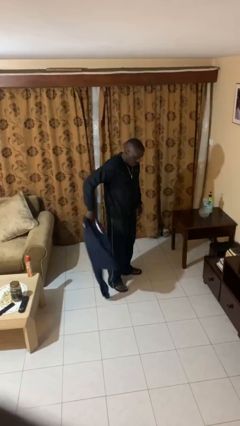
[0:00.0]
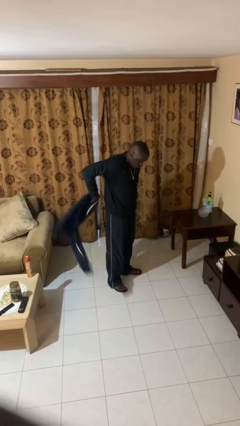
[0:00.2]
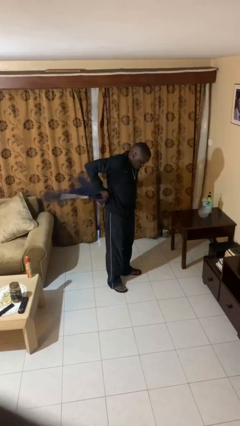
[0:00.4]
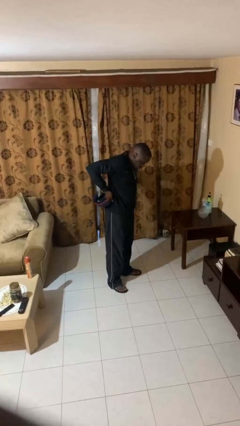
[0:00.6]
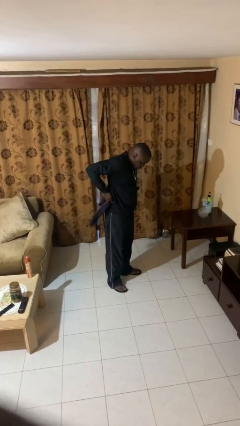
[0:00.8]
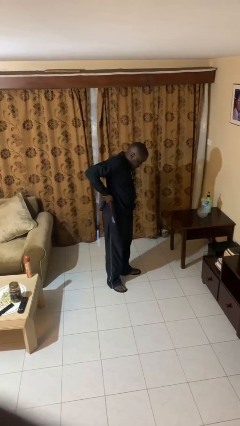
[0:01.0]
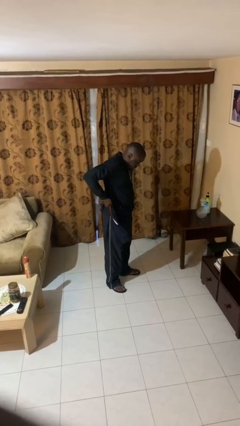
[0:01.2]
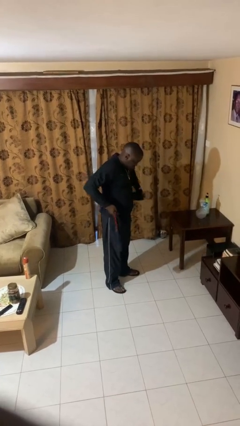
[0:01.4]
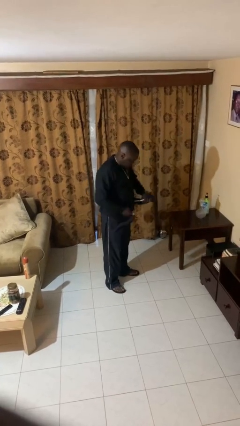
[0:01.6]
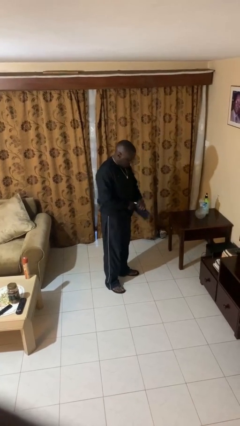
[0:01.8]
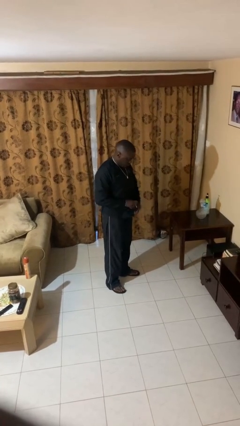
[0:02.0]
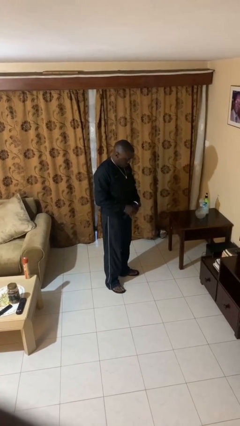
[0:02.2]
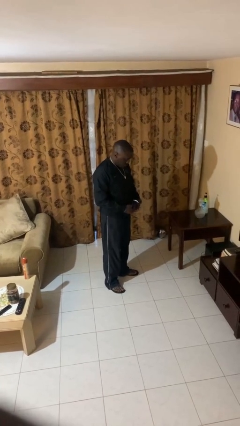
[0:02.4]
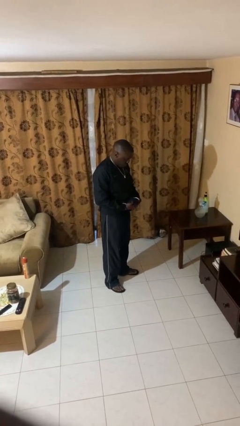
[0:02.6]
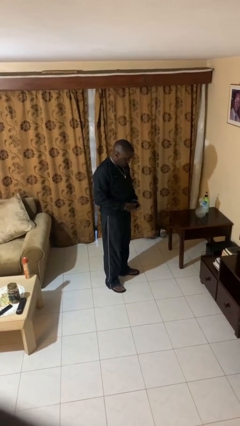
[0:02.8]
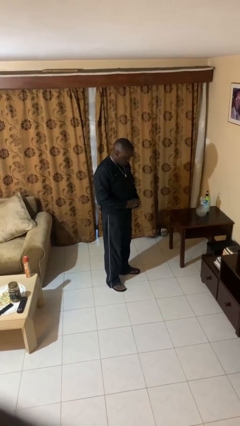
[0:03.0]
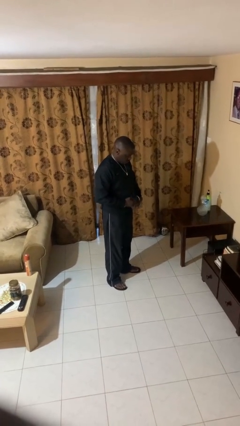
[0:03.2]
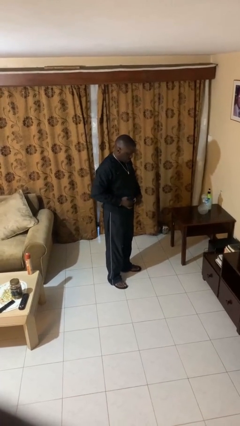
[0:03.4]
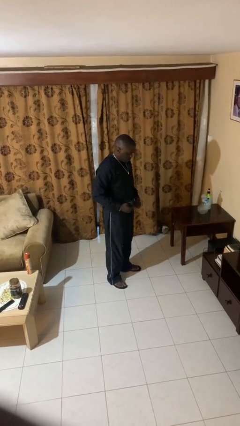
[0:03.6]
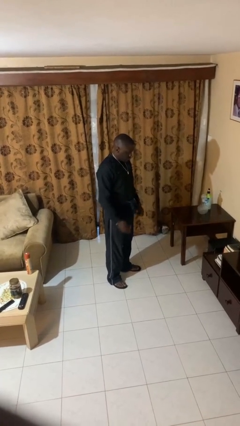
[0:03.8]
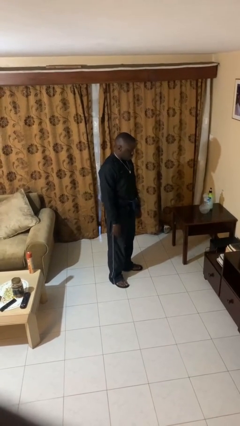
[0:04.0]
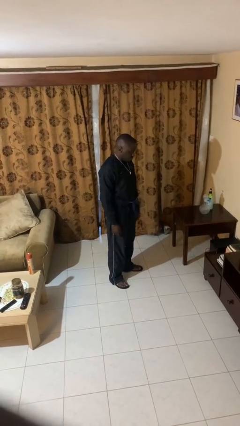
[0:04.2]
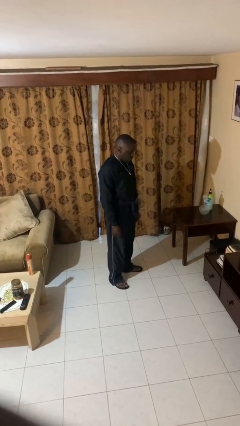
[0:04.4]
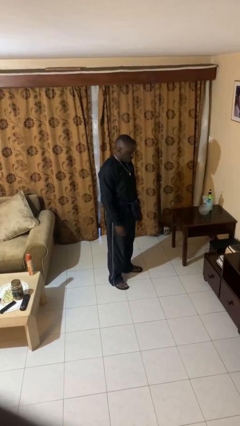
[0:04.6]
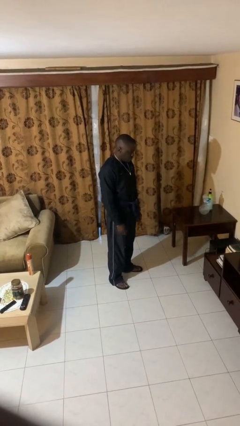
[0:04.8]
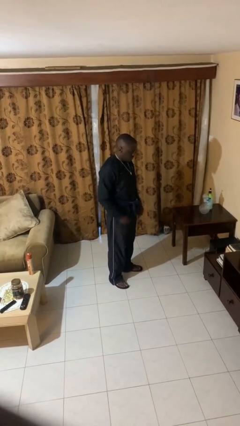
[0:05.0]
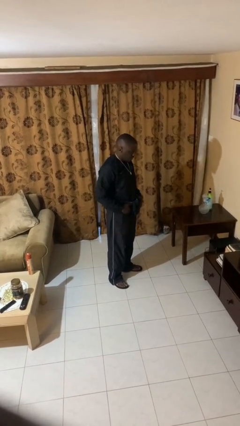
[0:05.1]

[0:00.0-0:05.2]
person ties jacket around waist

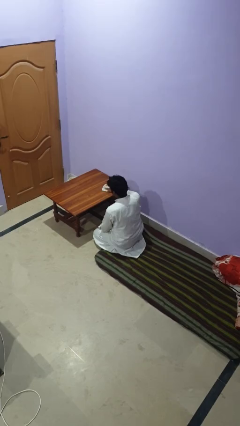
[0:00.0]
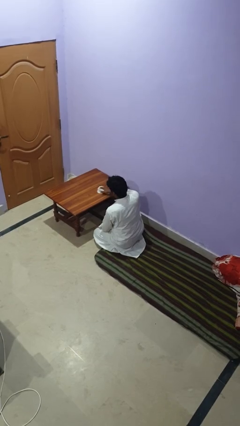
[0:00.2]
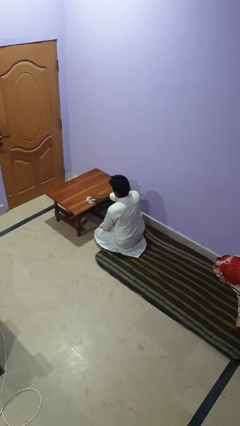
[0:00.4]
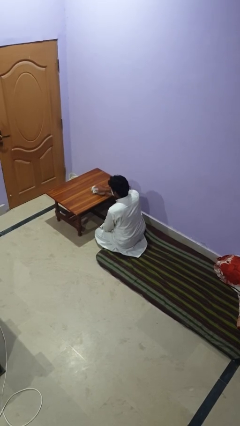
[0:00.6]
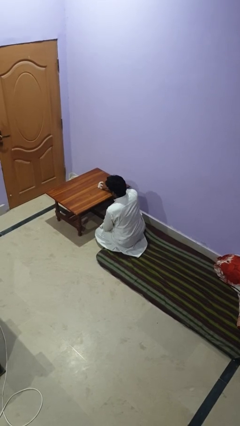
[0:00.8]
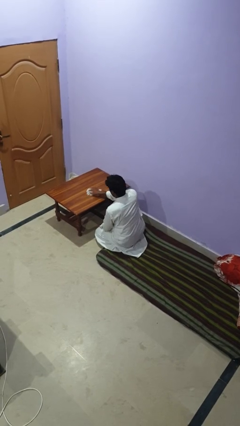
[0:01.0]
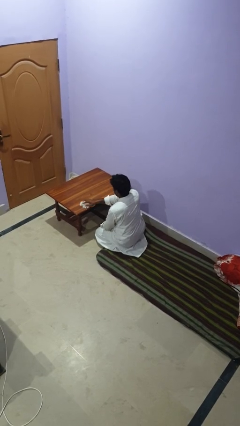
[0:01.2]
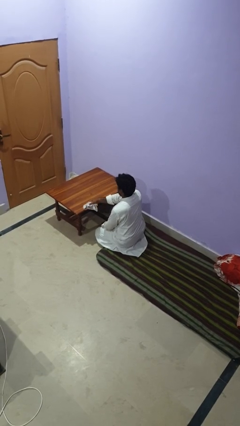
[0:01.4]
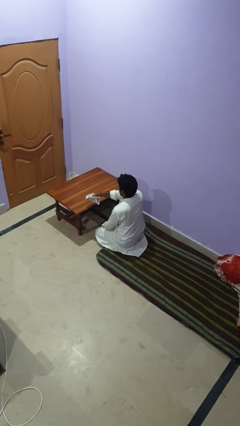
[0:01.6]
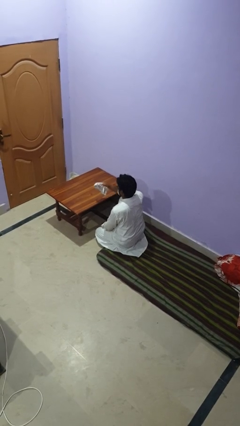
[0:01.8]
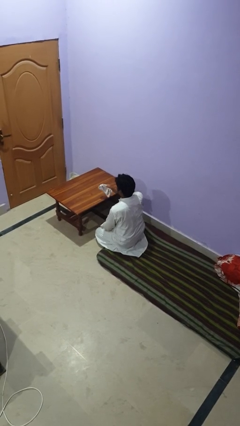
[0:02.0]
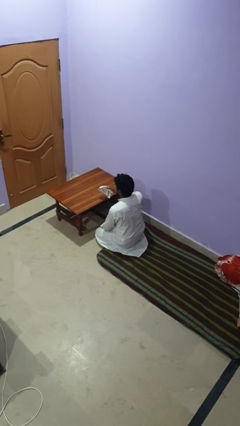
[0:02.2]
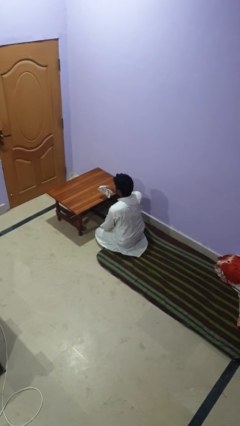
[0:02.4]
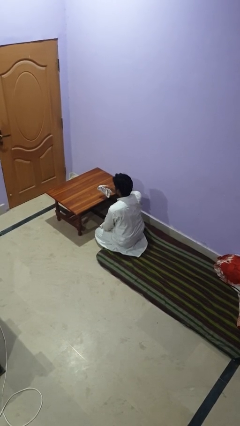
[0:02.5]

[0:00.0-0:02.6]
person cleans table with rag

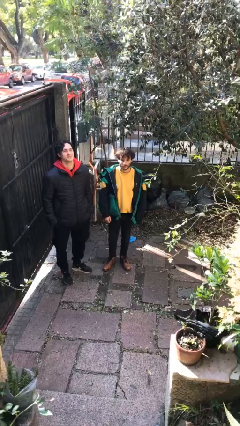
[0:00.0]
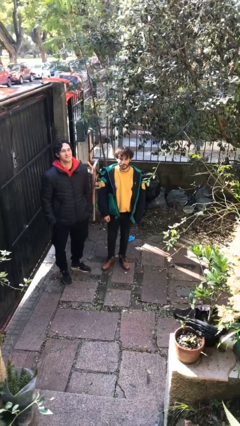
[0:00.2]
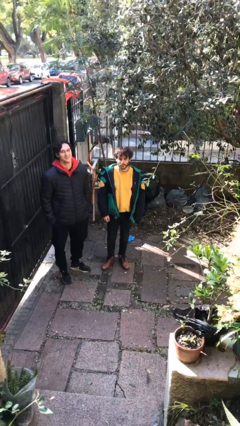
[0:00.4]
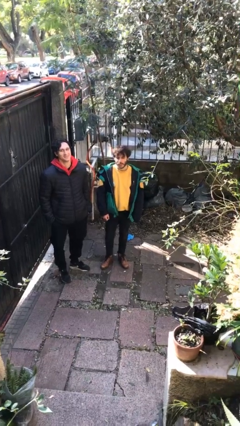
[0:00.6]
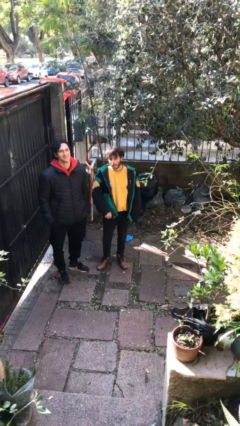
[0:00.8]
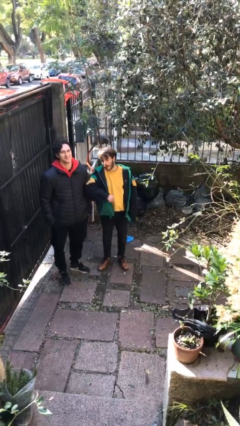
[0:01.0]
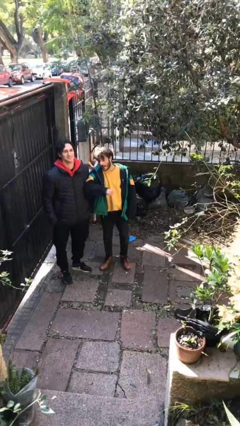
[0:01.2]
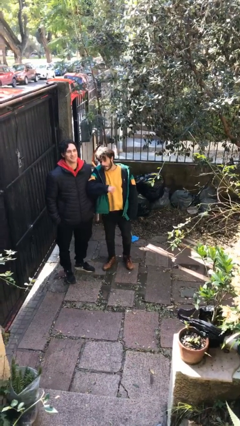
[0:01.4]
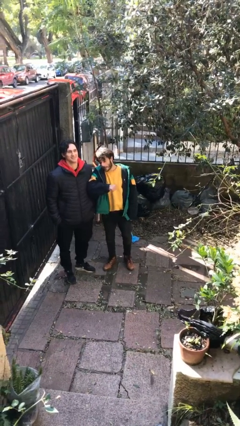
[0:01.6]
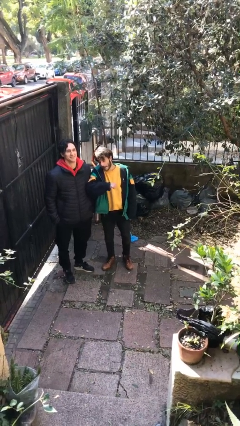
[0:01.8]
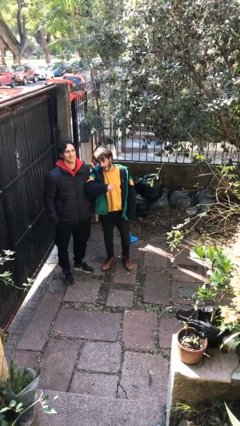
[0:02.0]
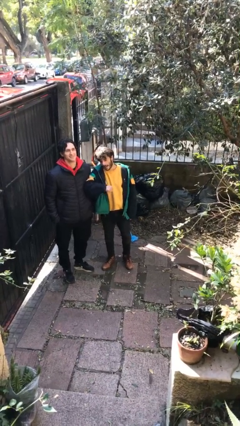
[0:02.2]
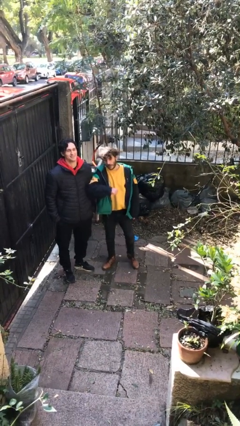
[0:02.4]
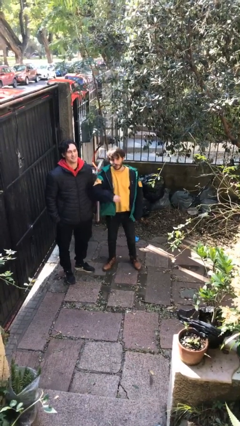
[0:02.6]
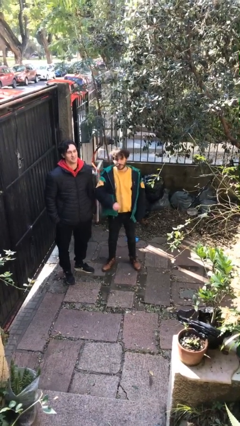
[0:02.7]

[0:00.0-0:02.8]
person nudges person with elbow

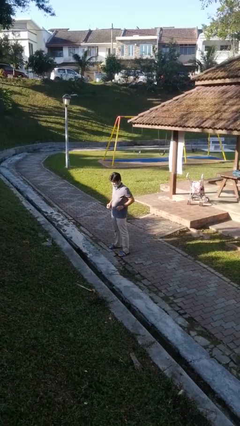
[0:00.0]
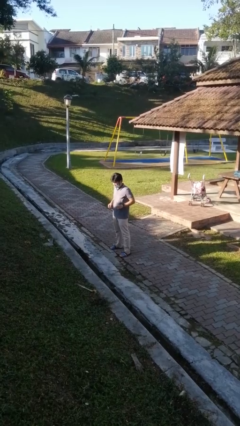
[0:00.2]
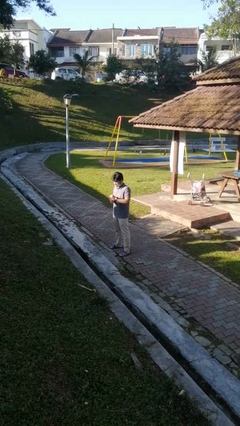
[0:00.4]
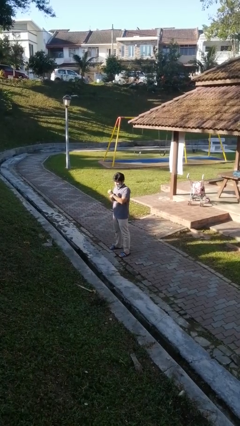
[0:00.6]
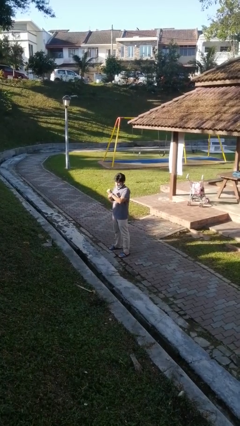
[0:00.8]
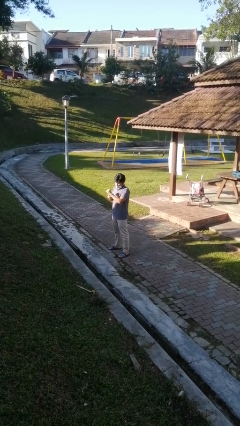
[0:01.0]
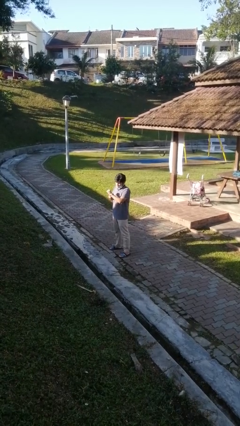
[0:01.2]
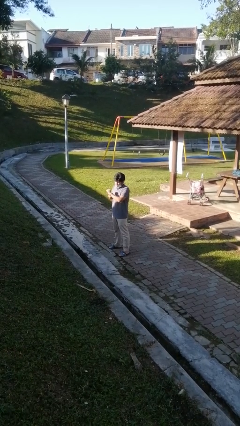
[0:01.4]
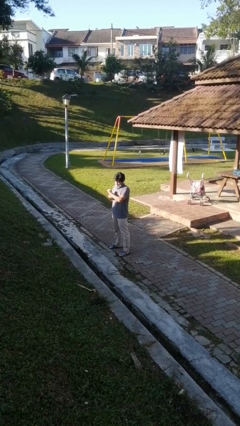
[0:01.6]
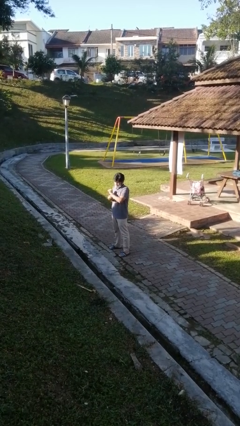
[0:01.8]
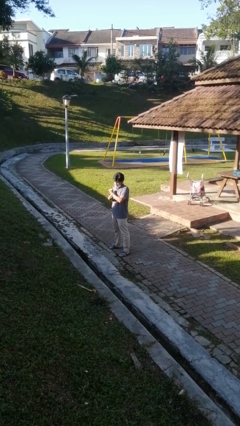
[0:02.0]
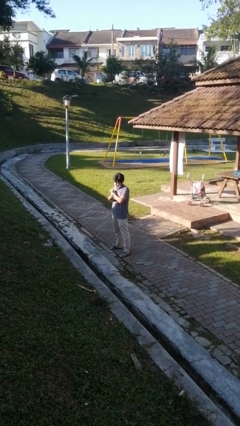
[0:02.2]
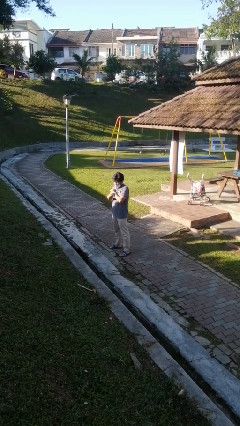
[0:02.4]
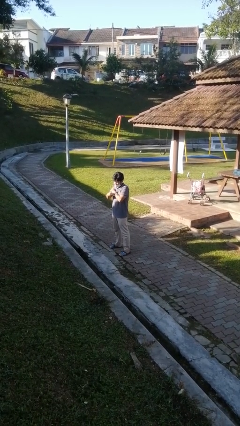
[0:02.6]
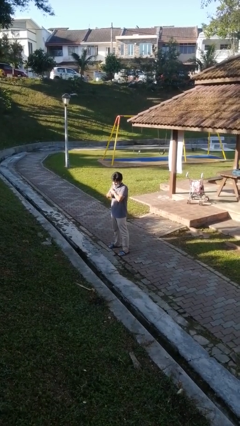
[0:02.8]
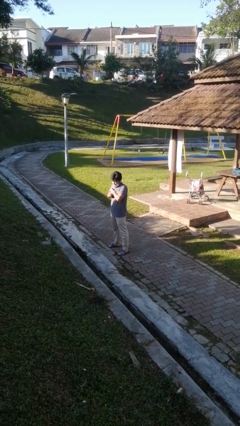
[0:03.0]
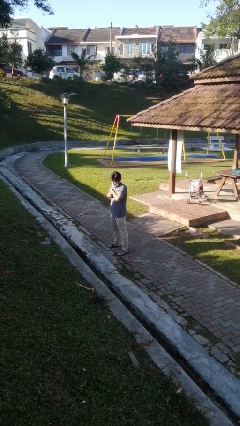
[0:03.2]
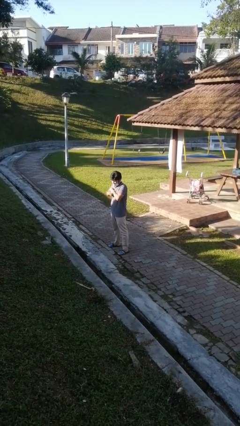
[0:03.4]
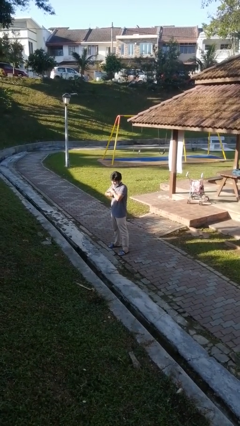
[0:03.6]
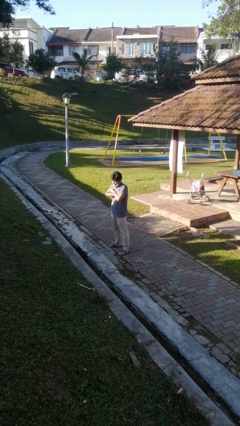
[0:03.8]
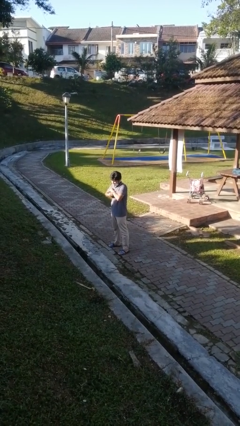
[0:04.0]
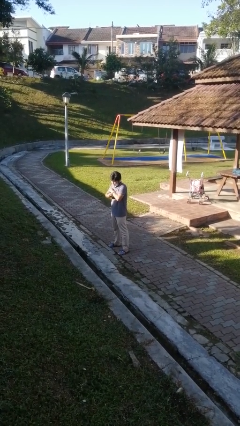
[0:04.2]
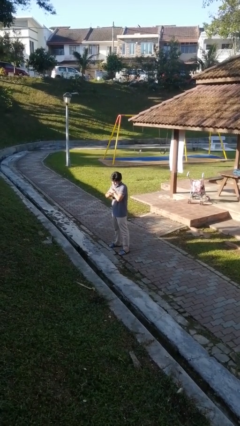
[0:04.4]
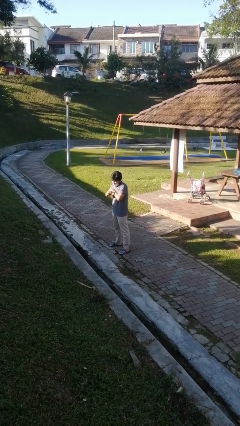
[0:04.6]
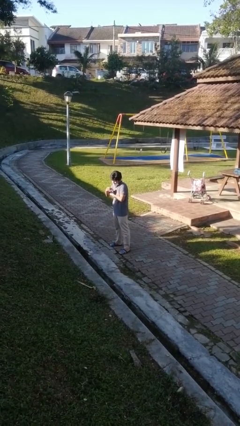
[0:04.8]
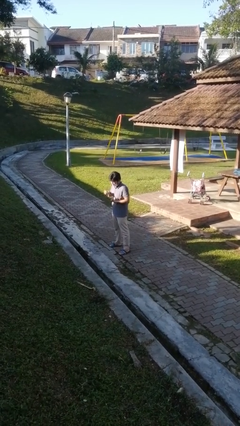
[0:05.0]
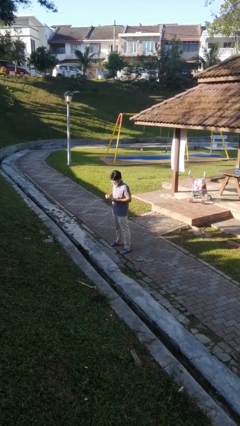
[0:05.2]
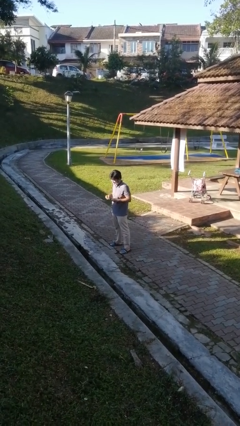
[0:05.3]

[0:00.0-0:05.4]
person takes off wristwatch

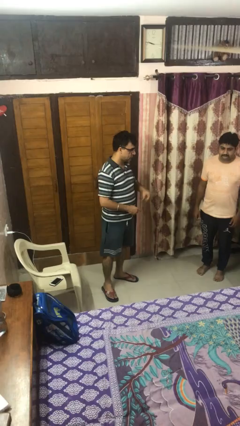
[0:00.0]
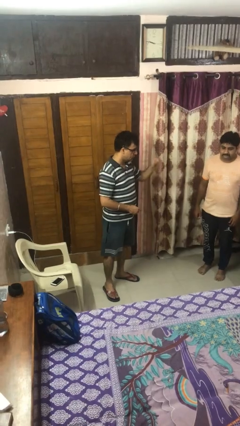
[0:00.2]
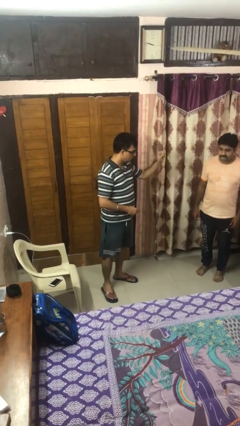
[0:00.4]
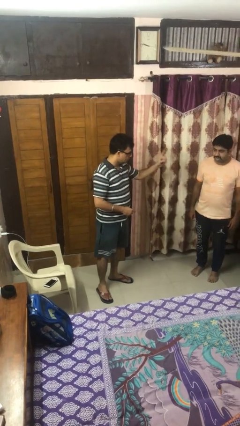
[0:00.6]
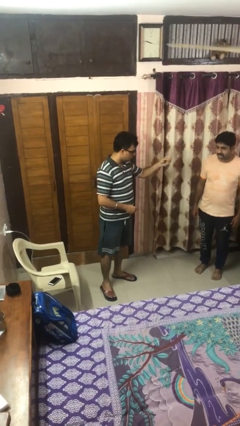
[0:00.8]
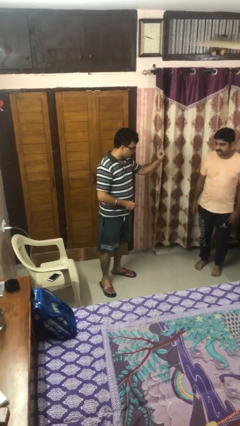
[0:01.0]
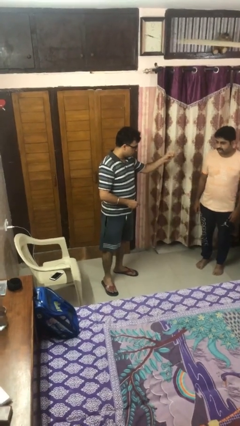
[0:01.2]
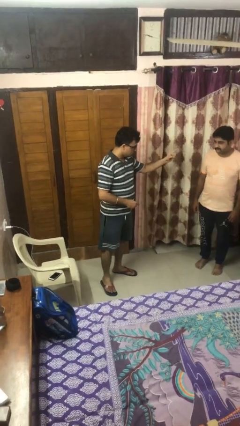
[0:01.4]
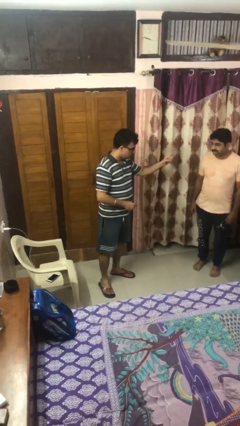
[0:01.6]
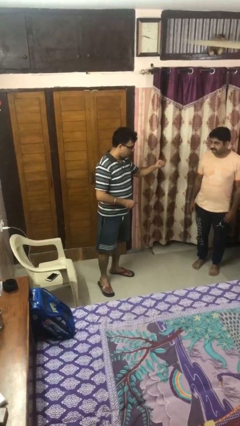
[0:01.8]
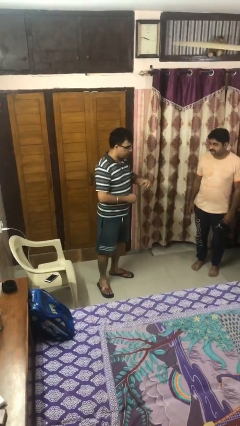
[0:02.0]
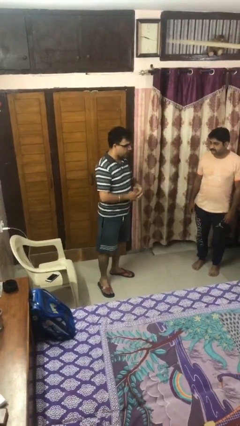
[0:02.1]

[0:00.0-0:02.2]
person points at person
